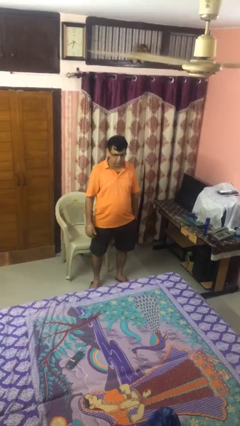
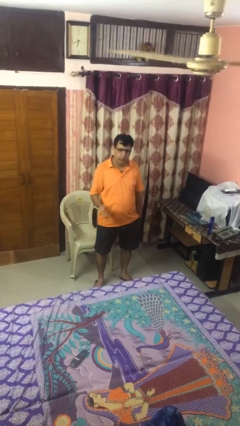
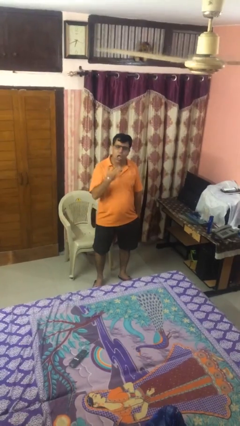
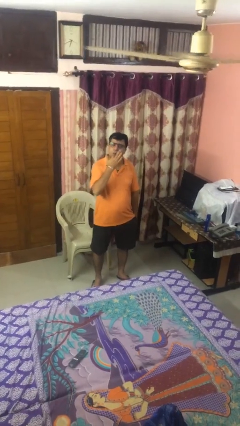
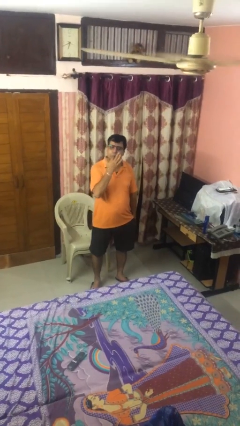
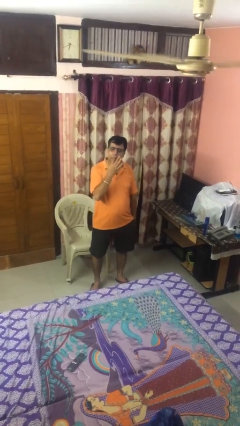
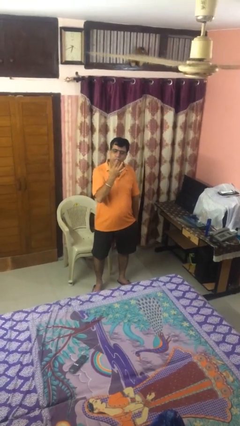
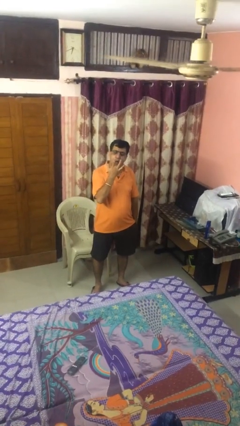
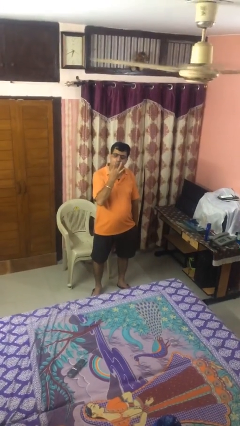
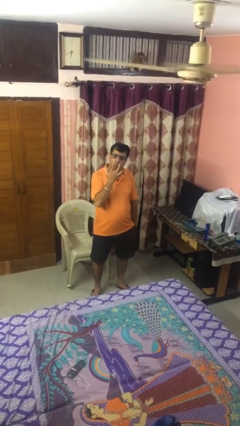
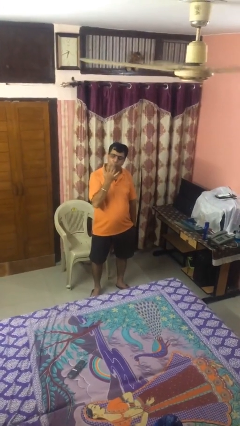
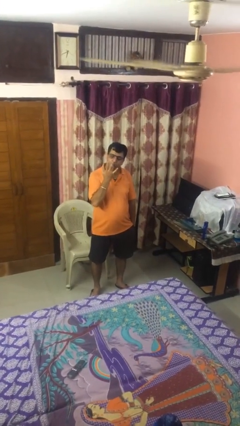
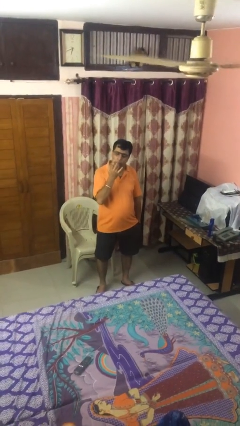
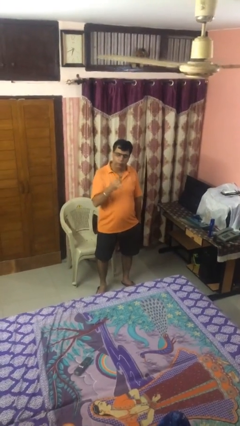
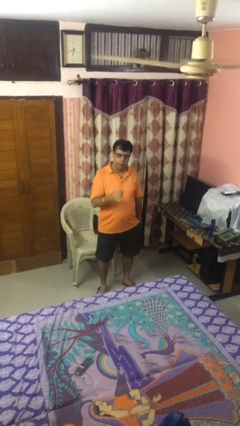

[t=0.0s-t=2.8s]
person licks fingers

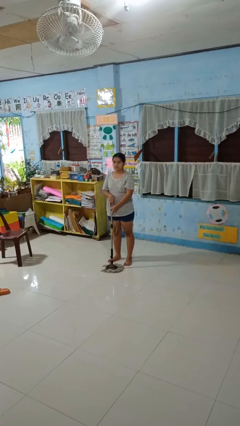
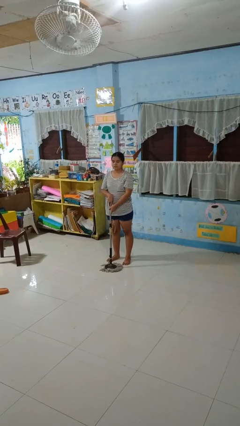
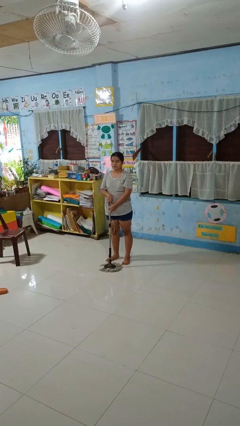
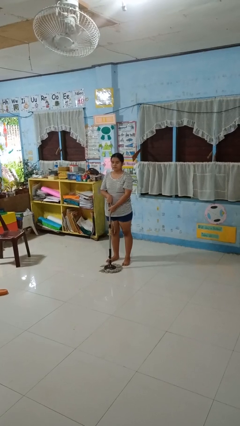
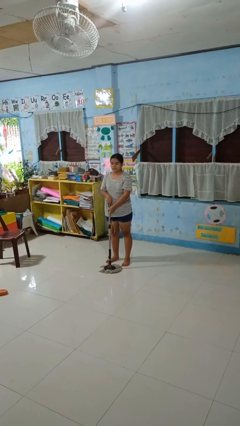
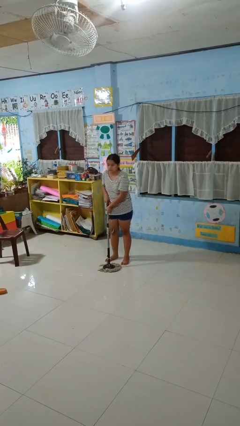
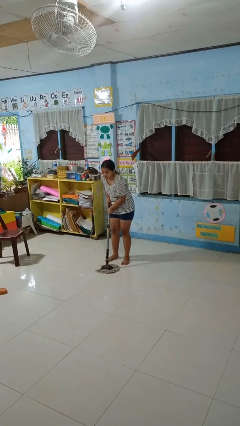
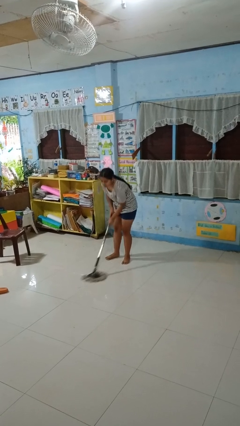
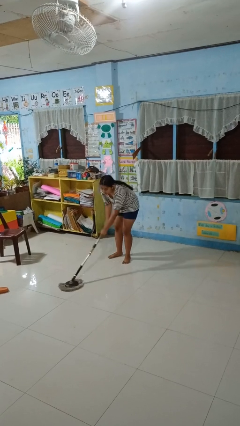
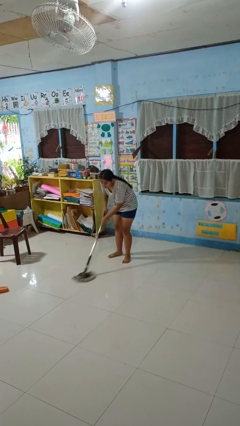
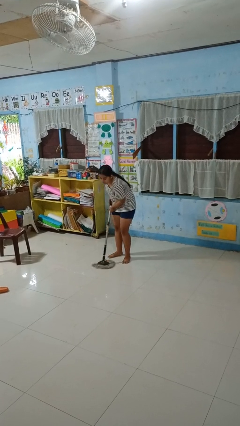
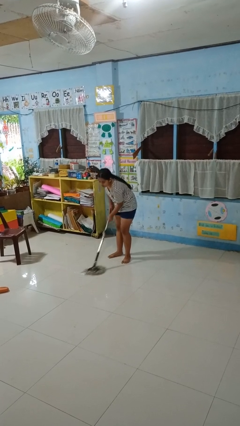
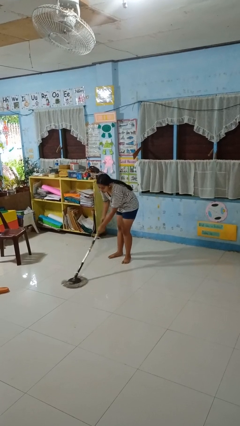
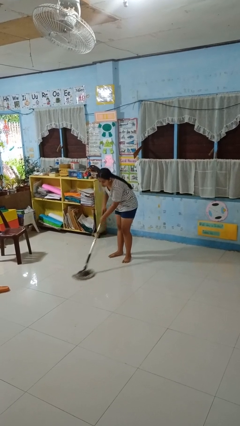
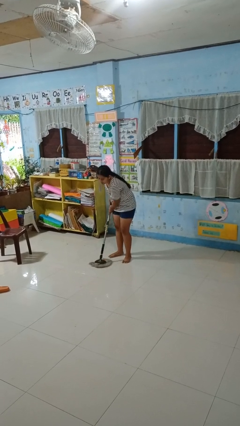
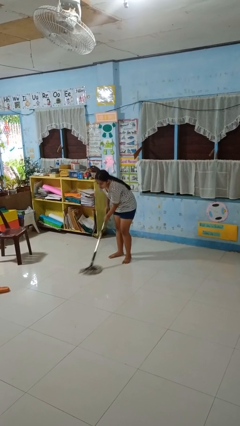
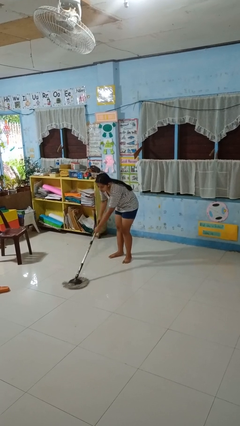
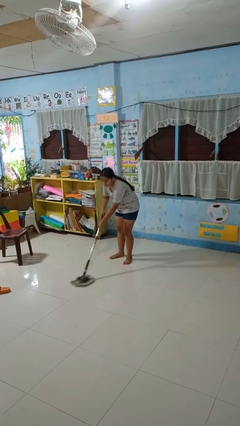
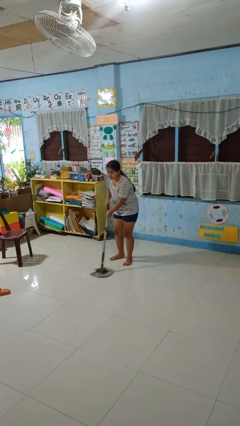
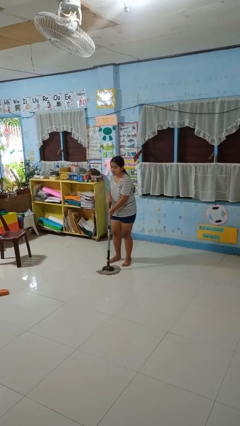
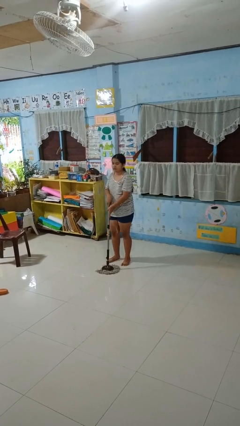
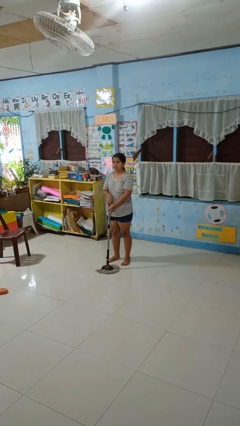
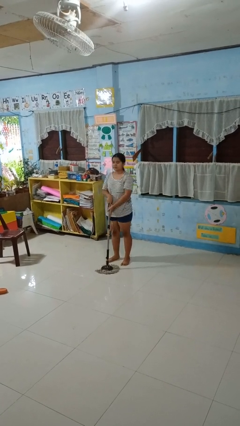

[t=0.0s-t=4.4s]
person mops

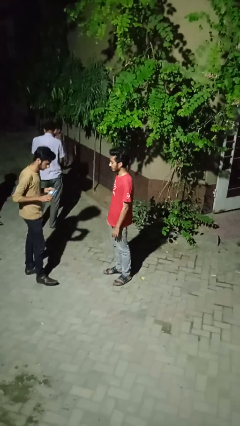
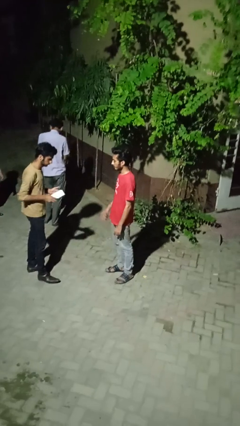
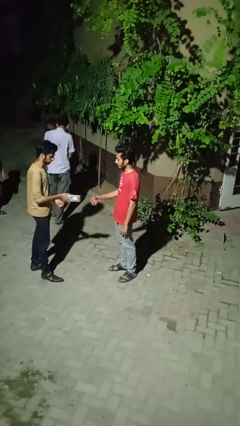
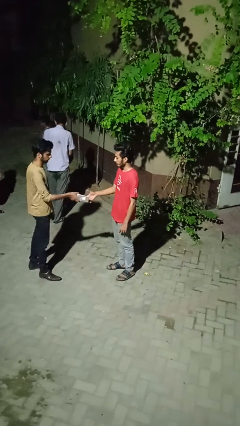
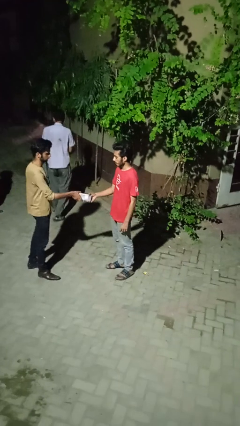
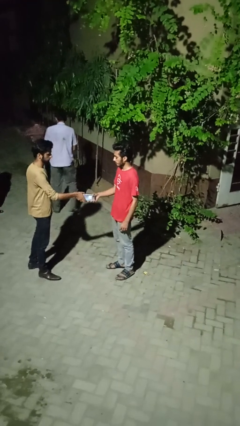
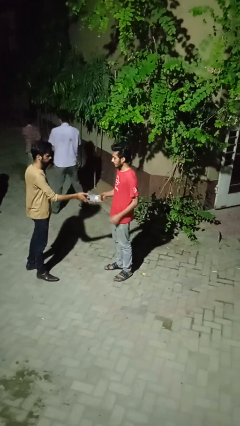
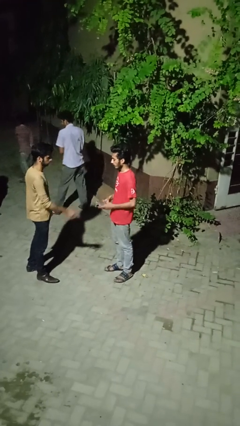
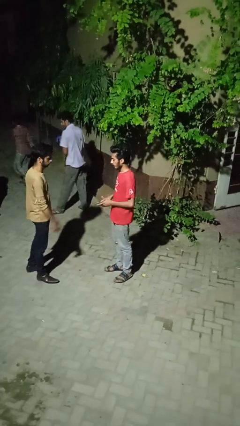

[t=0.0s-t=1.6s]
person transfers object to person

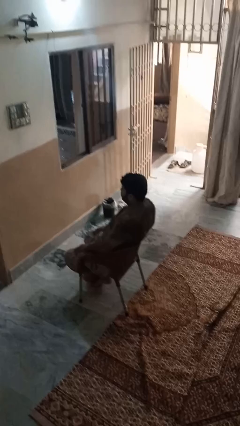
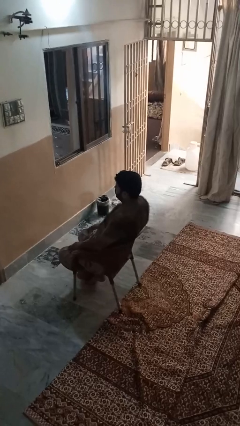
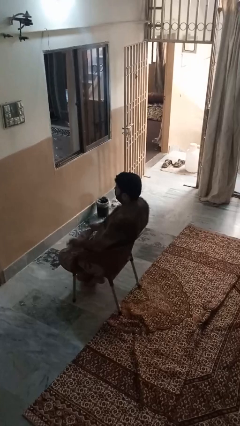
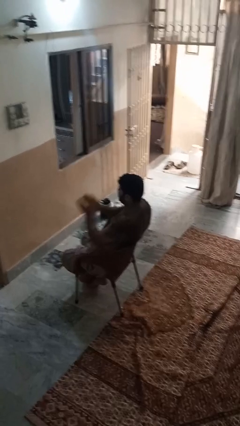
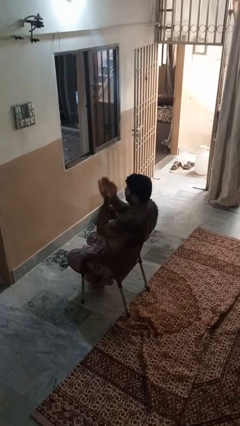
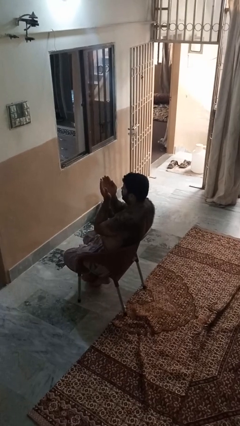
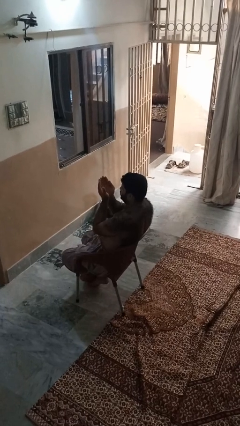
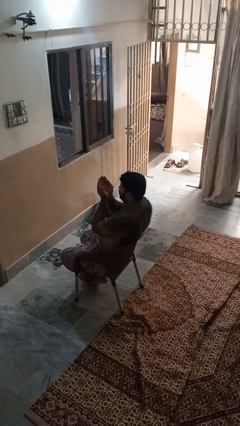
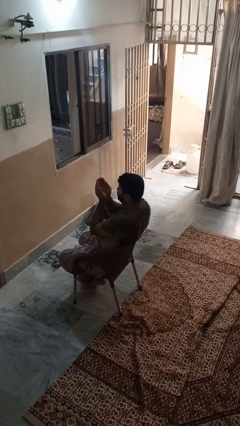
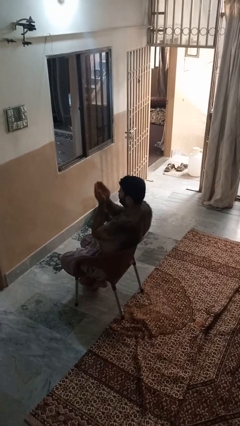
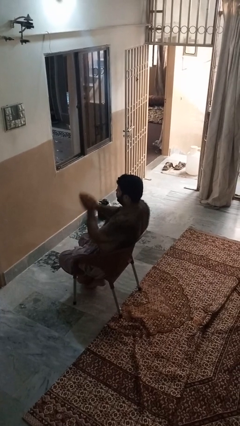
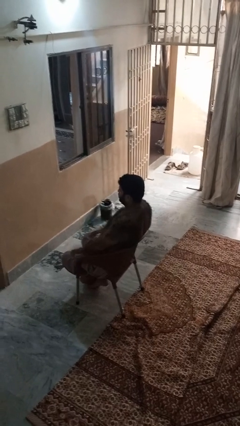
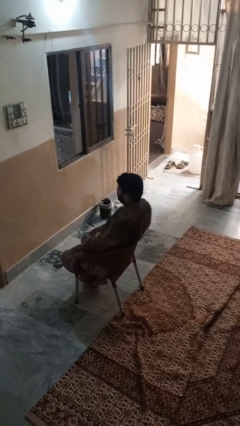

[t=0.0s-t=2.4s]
person prays

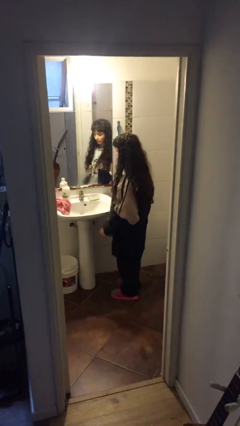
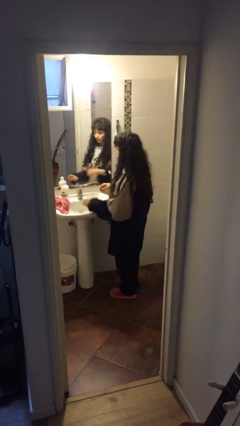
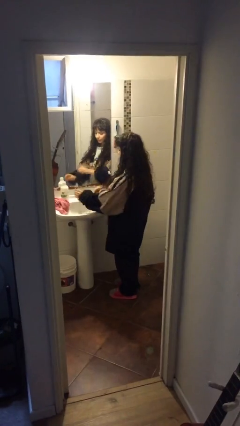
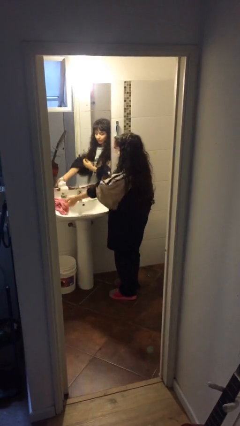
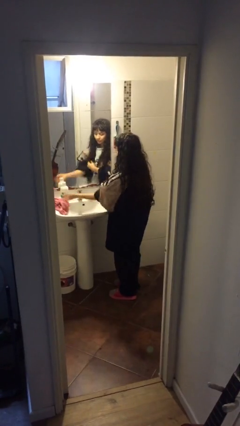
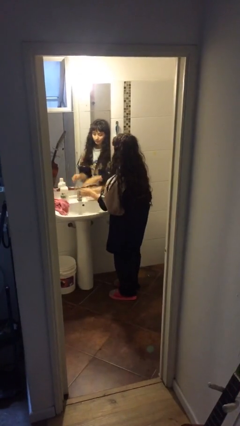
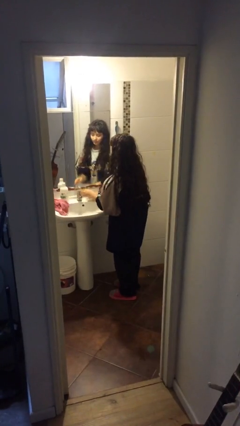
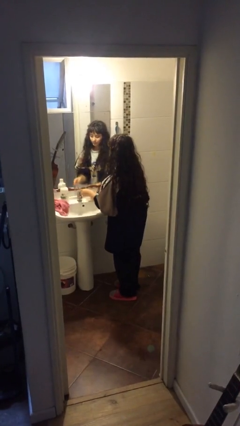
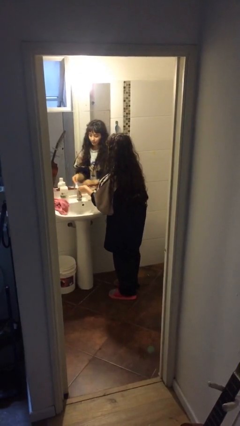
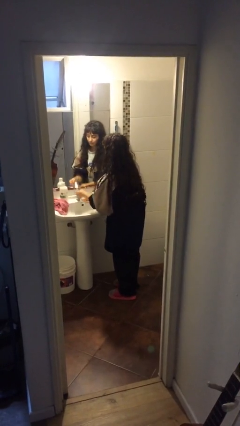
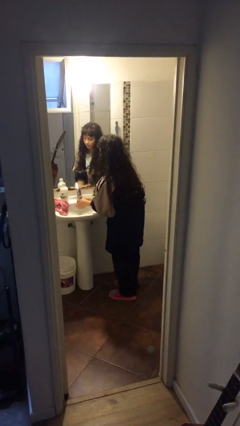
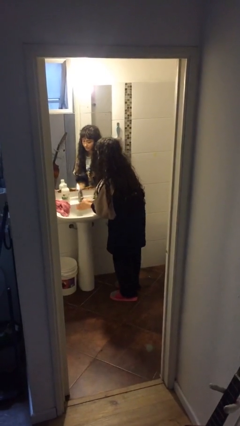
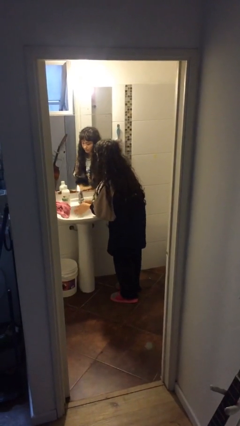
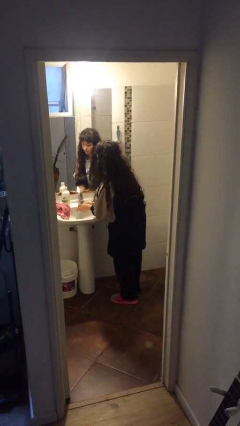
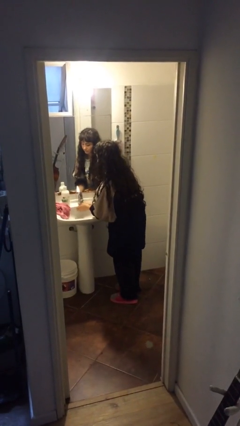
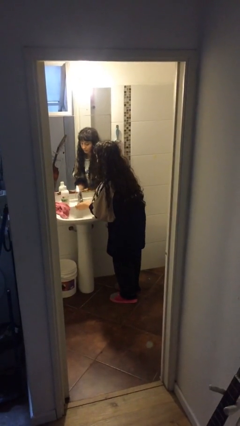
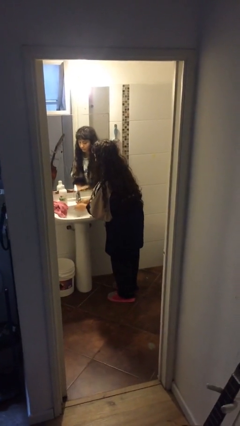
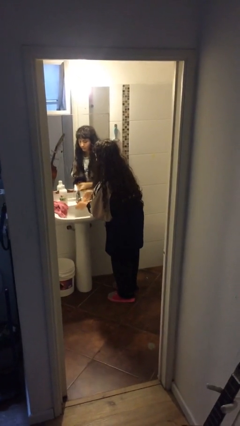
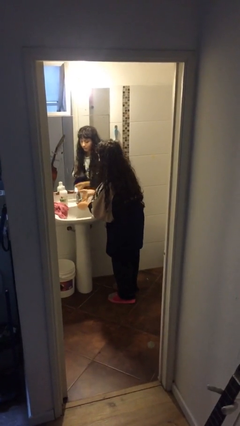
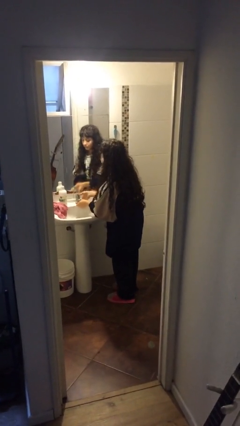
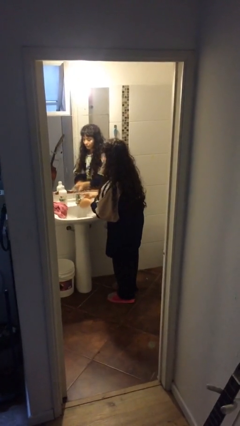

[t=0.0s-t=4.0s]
person washes hands

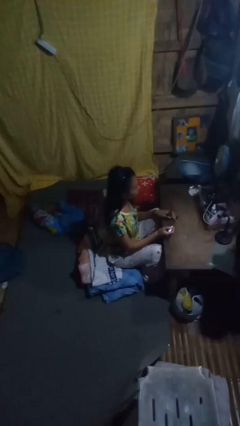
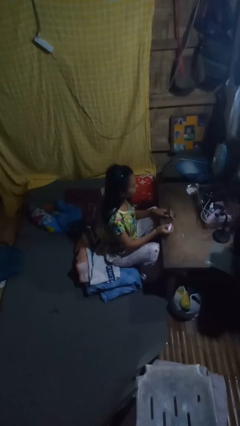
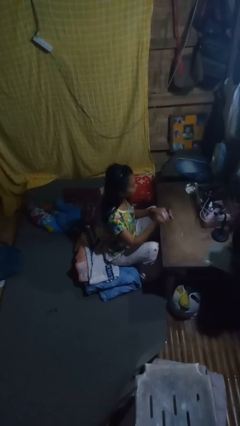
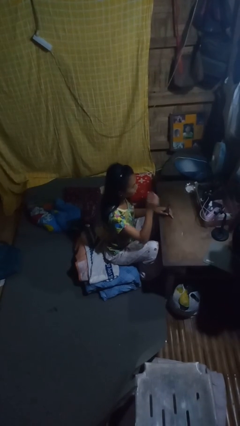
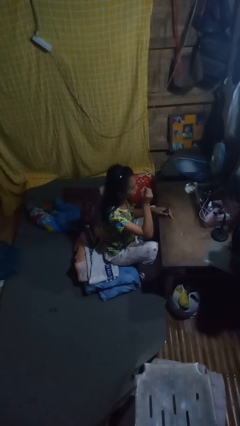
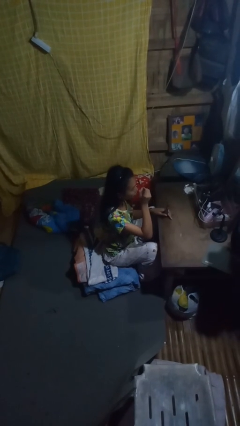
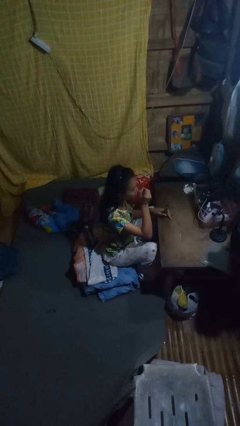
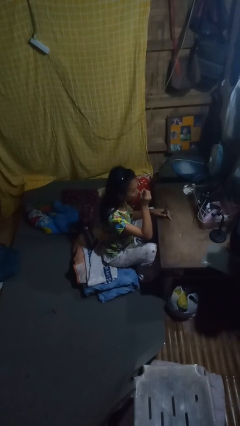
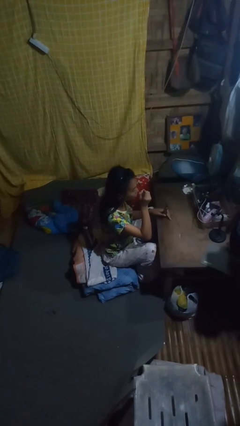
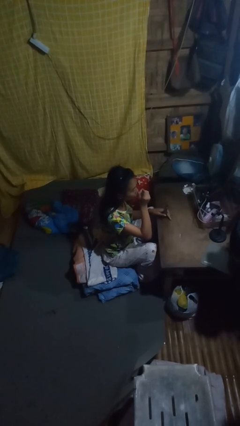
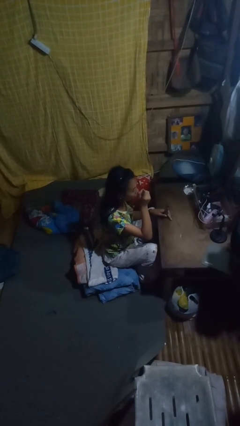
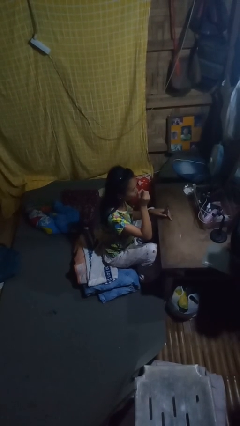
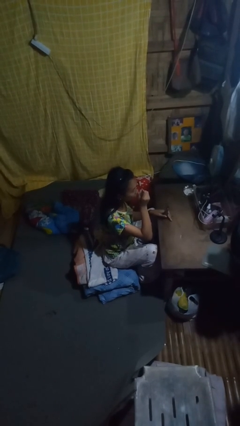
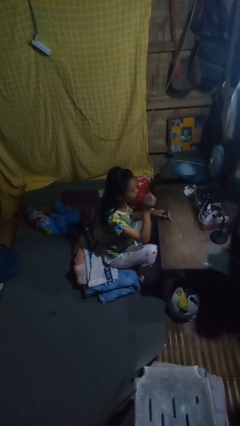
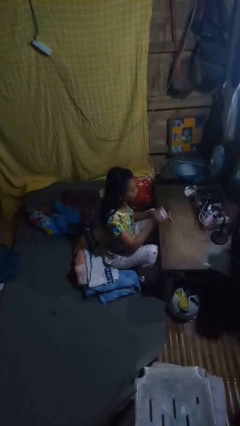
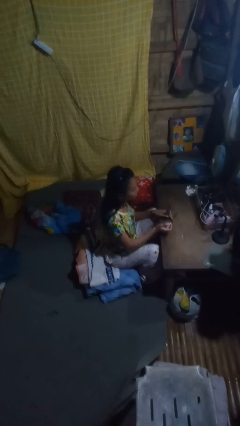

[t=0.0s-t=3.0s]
person applies eye makeup
